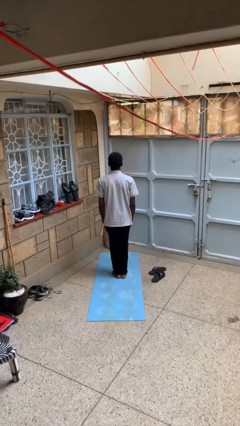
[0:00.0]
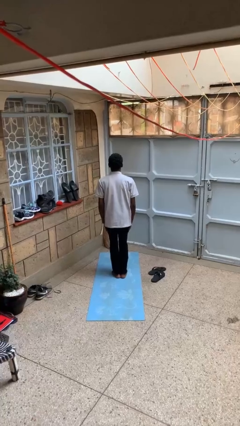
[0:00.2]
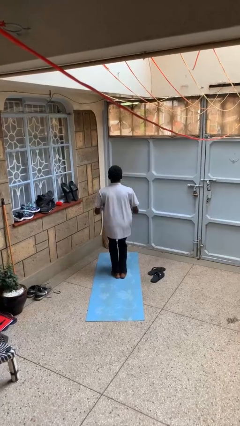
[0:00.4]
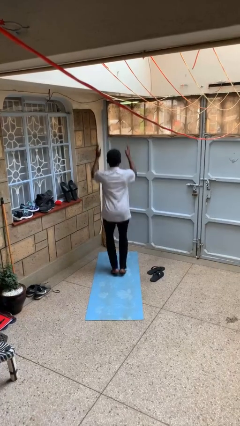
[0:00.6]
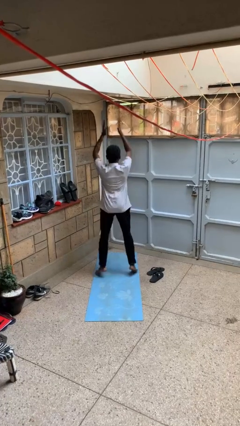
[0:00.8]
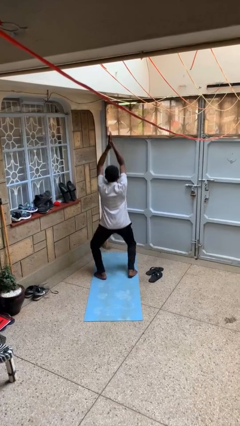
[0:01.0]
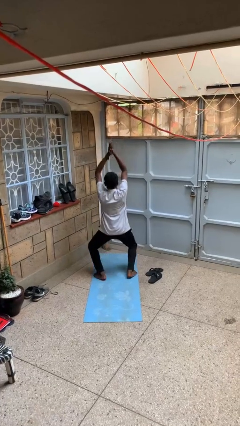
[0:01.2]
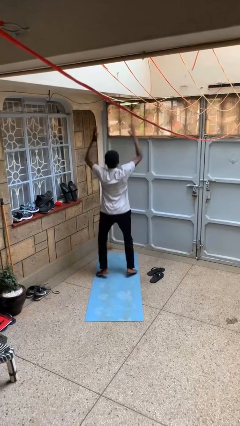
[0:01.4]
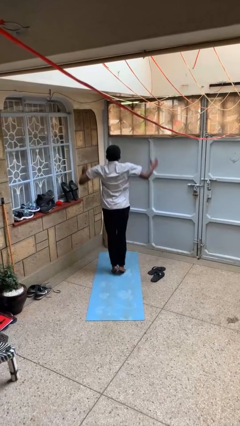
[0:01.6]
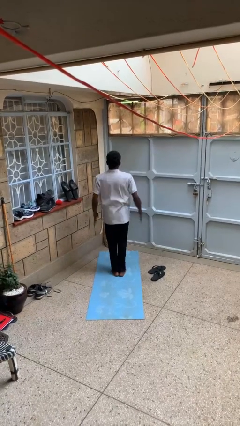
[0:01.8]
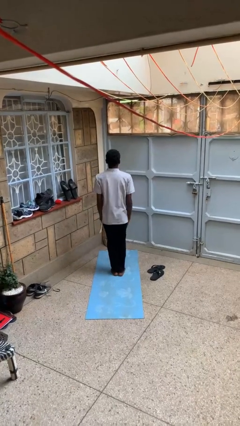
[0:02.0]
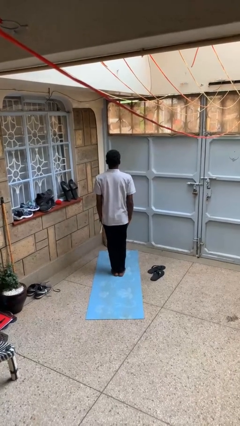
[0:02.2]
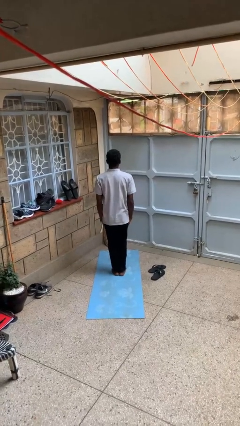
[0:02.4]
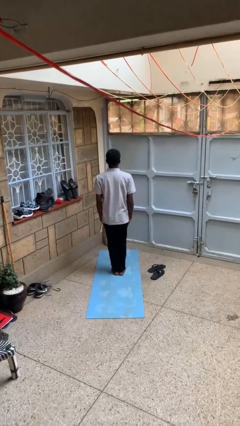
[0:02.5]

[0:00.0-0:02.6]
person exercises with jumping jacks

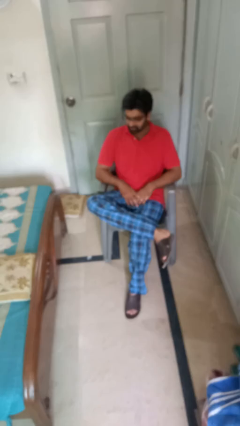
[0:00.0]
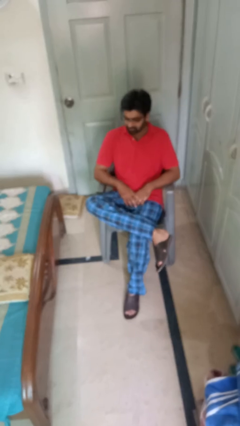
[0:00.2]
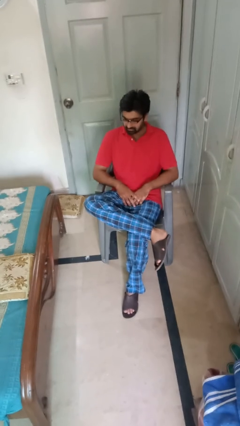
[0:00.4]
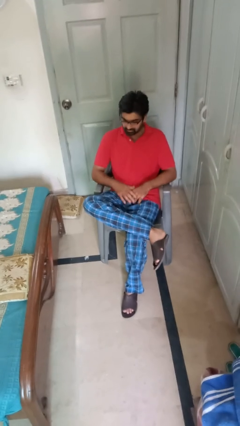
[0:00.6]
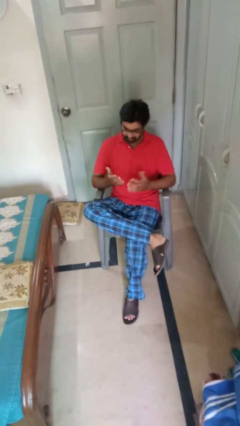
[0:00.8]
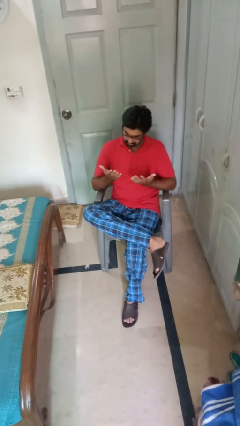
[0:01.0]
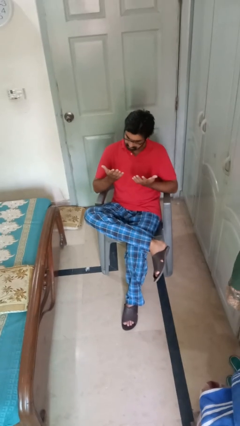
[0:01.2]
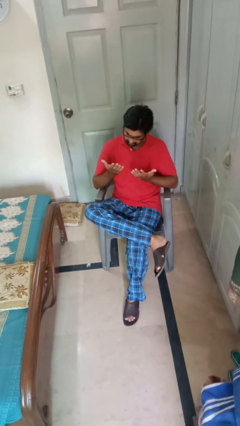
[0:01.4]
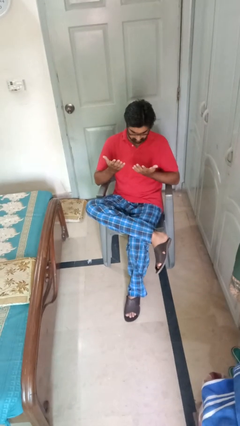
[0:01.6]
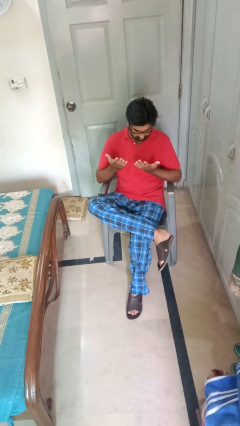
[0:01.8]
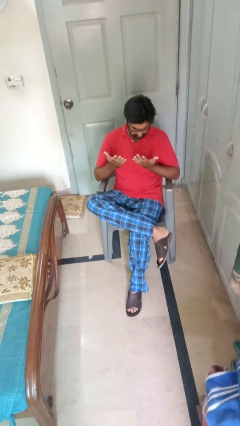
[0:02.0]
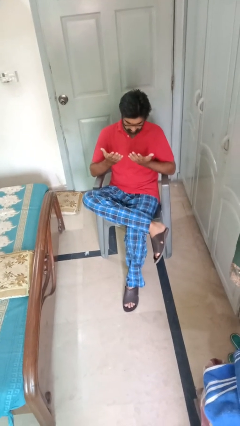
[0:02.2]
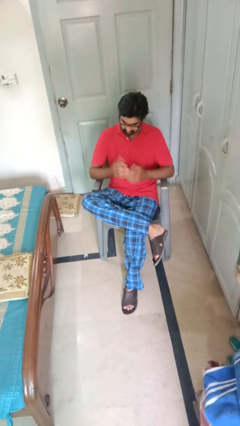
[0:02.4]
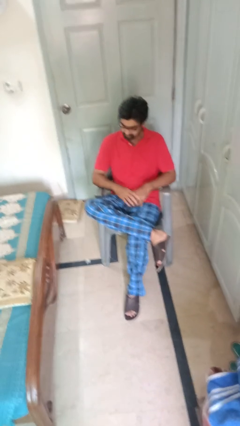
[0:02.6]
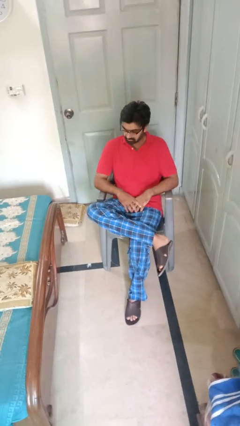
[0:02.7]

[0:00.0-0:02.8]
person looks at hands in lap

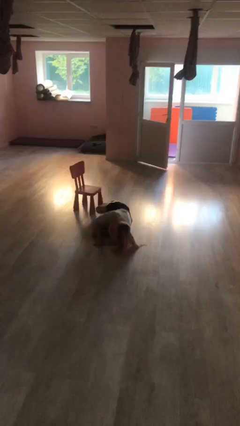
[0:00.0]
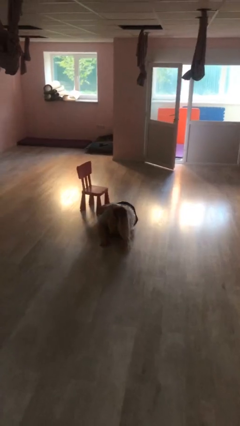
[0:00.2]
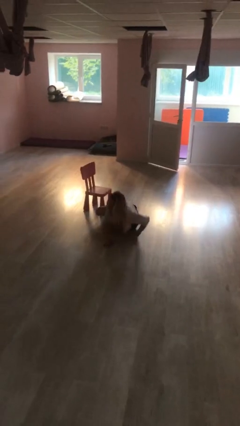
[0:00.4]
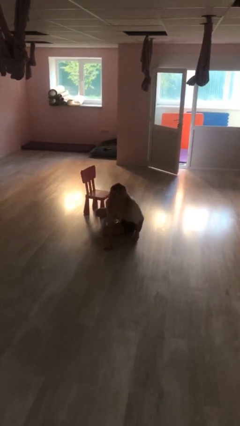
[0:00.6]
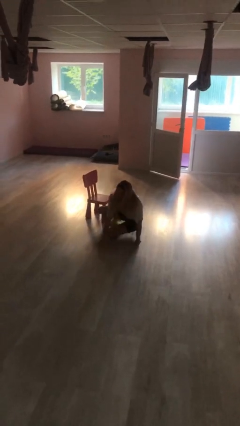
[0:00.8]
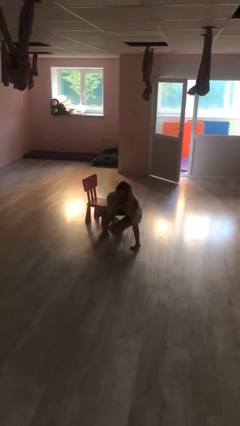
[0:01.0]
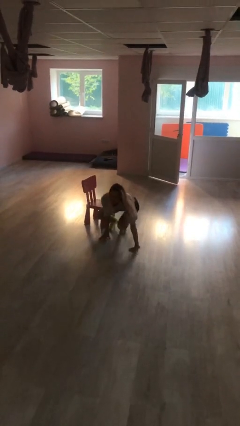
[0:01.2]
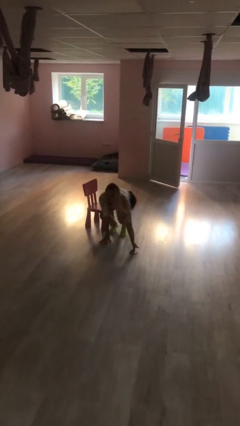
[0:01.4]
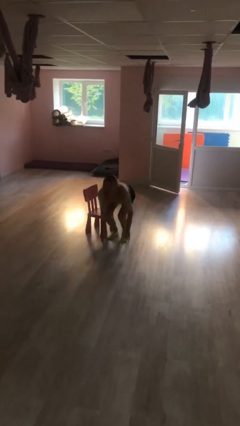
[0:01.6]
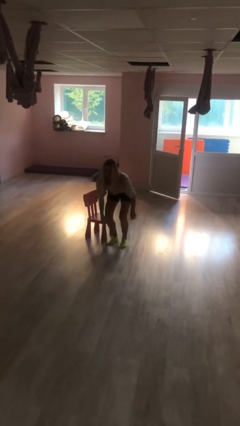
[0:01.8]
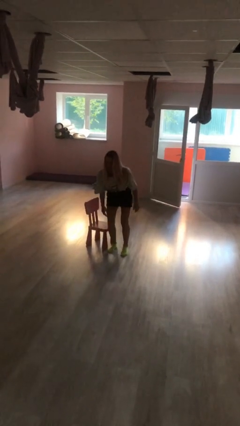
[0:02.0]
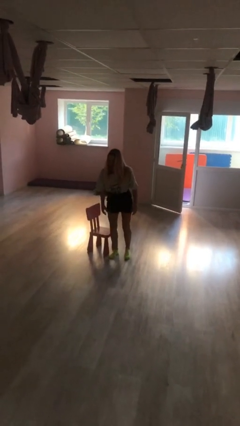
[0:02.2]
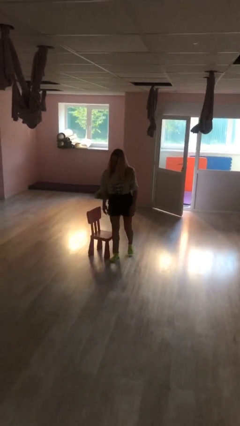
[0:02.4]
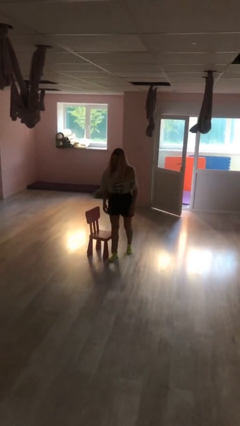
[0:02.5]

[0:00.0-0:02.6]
person stands up from floor

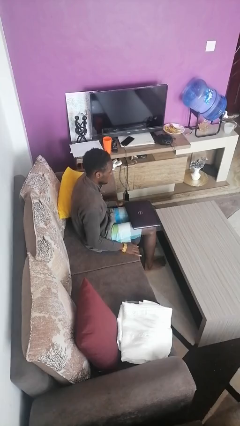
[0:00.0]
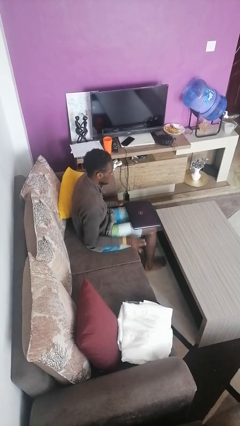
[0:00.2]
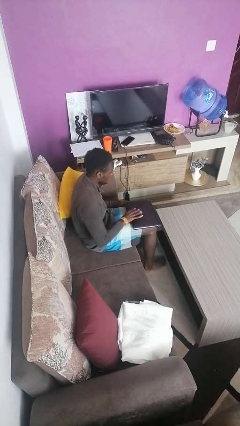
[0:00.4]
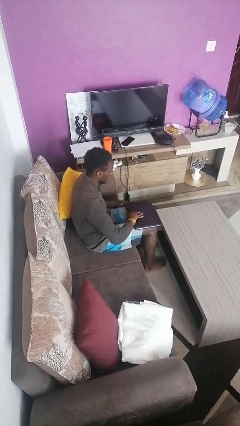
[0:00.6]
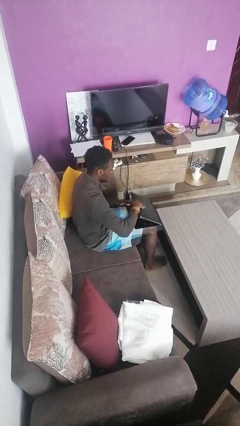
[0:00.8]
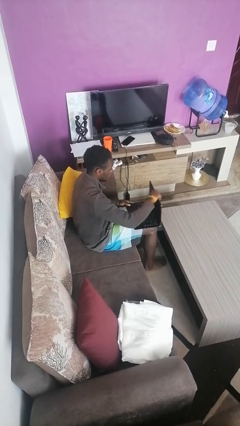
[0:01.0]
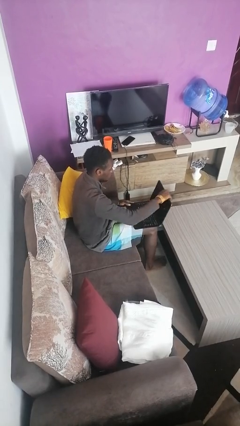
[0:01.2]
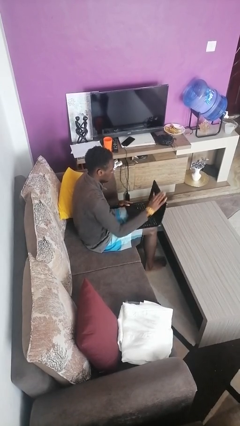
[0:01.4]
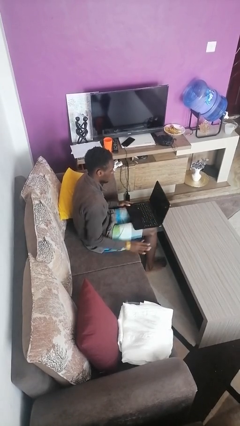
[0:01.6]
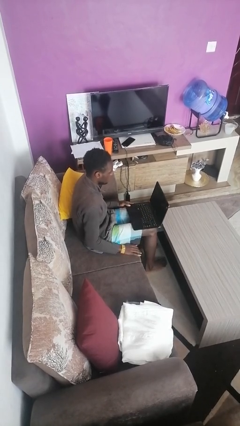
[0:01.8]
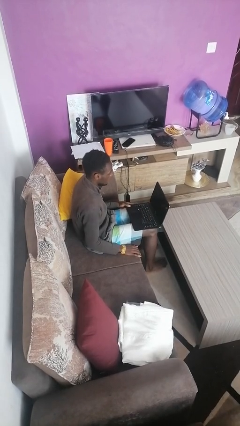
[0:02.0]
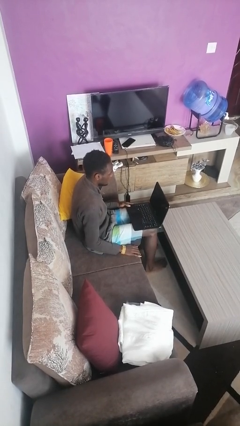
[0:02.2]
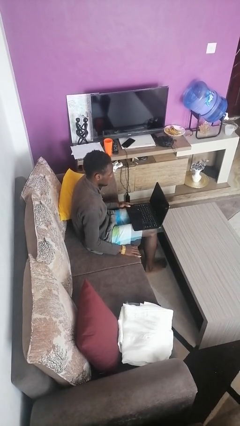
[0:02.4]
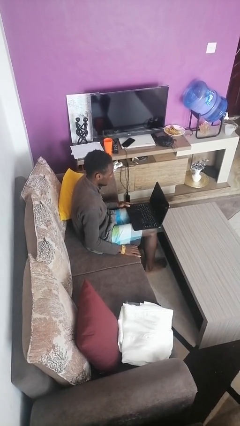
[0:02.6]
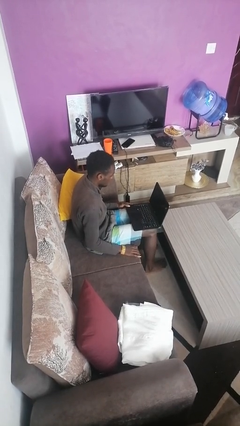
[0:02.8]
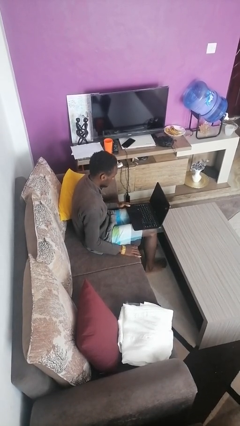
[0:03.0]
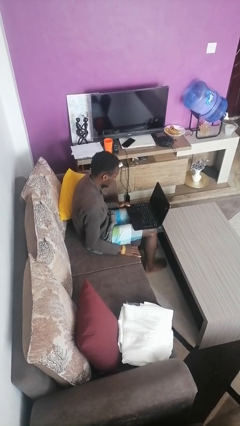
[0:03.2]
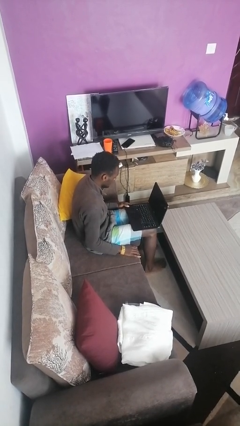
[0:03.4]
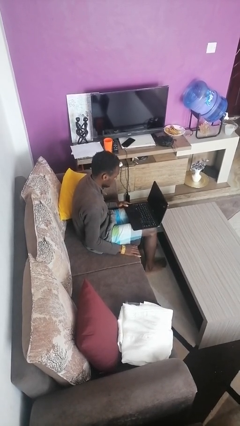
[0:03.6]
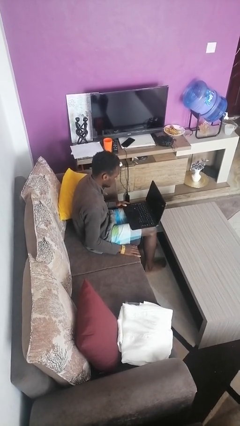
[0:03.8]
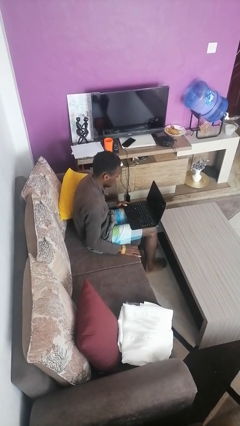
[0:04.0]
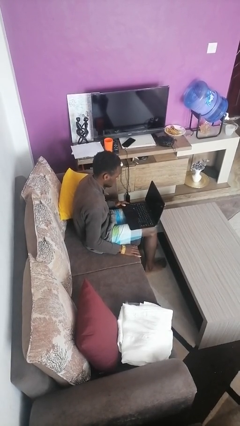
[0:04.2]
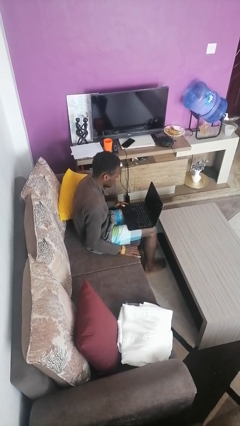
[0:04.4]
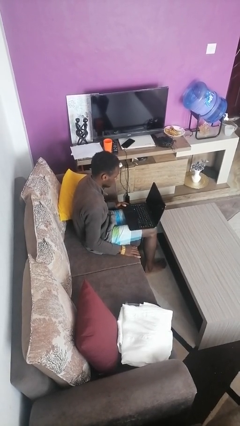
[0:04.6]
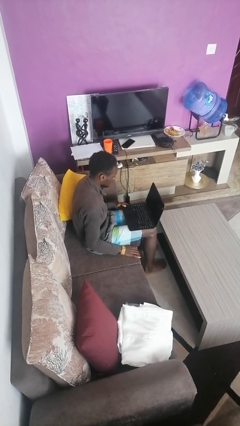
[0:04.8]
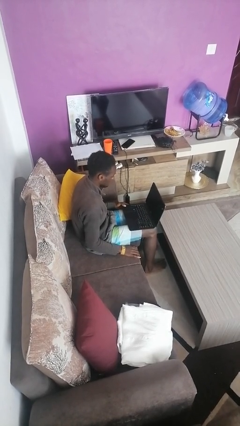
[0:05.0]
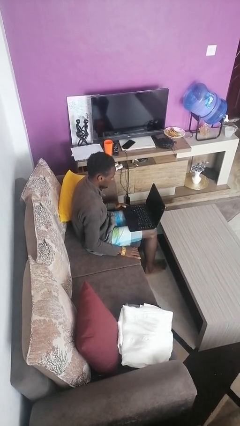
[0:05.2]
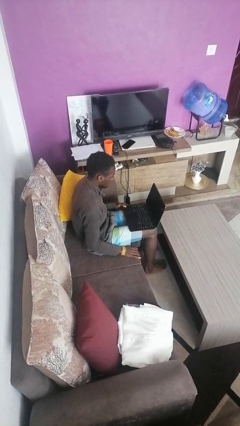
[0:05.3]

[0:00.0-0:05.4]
person opens laptop

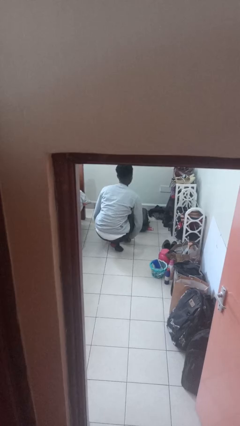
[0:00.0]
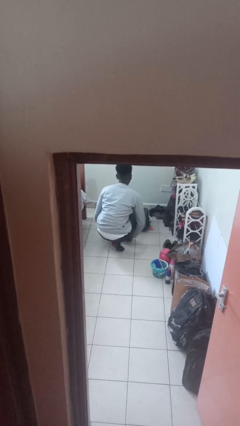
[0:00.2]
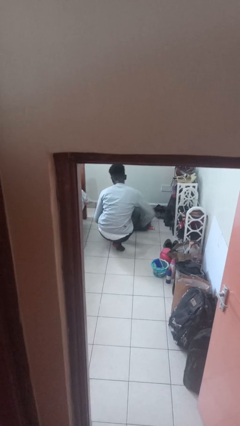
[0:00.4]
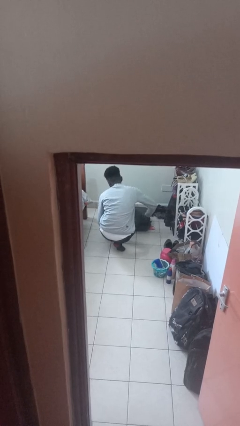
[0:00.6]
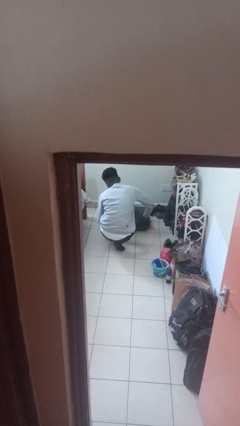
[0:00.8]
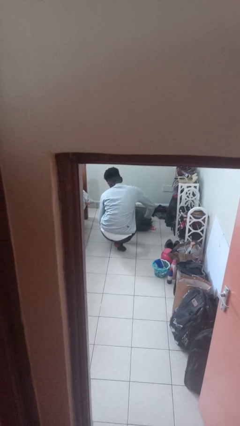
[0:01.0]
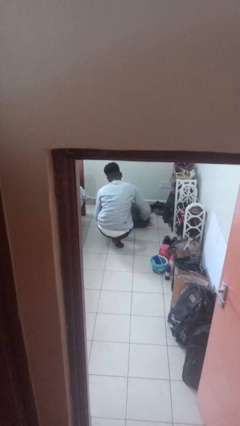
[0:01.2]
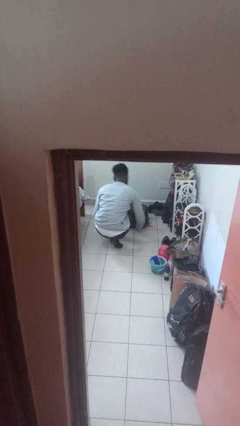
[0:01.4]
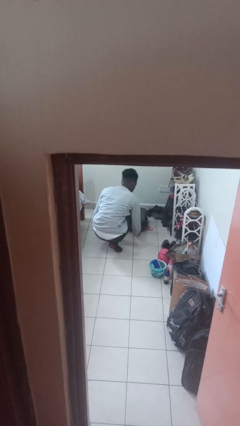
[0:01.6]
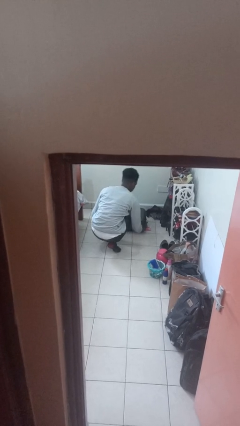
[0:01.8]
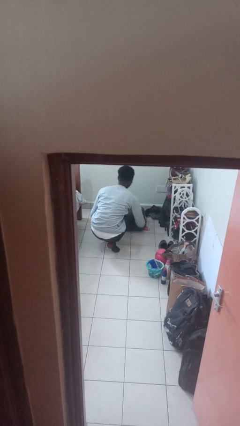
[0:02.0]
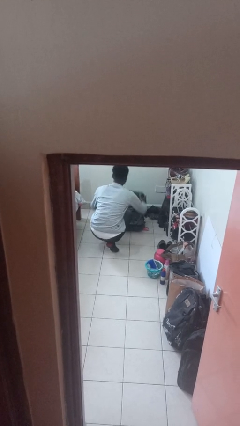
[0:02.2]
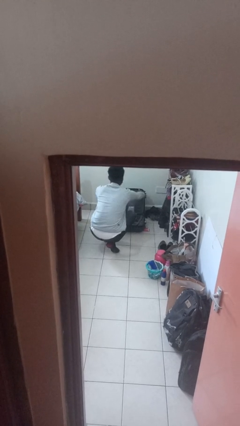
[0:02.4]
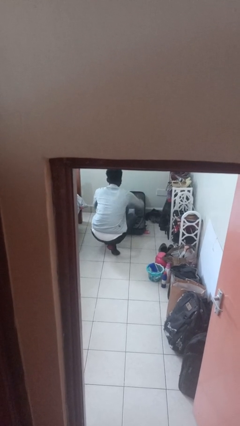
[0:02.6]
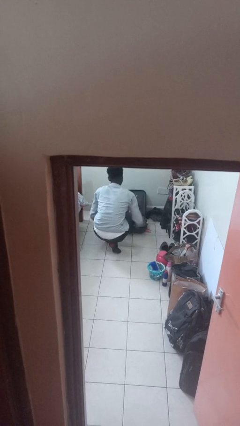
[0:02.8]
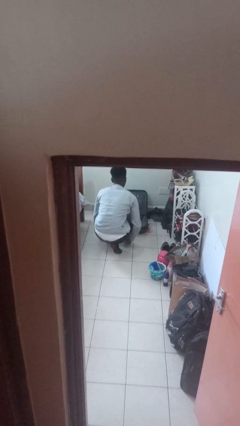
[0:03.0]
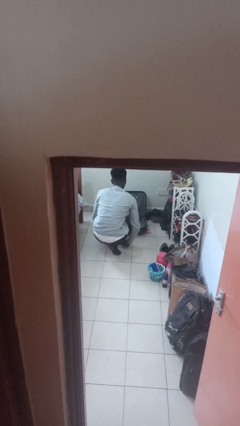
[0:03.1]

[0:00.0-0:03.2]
person opens suitcase

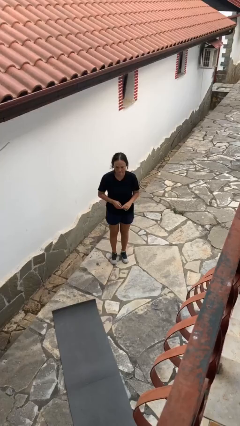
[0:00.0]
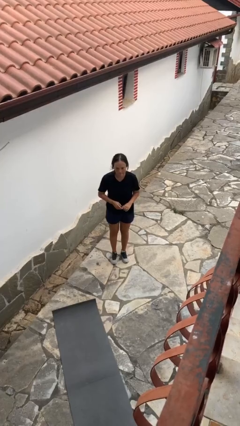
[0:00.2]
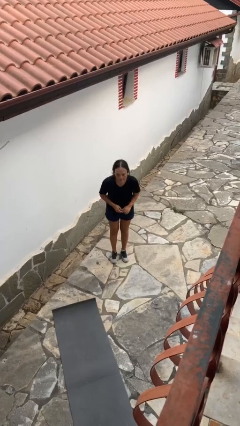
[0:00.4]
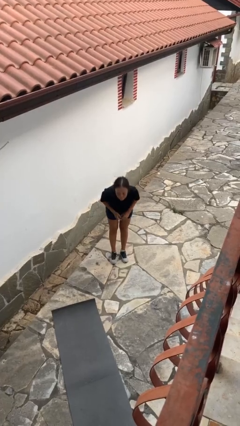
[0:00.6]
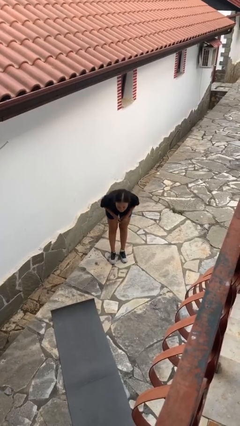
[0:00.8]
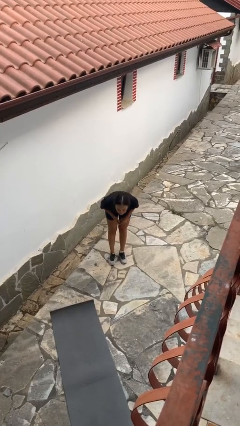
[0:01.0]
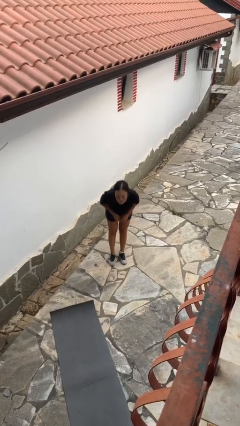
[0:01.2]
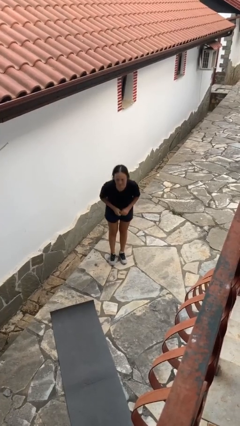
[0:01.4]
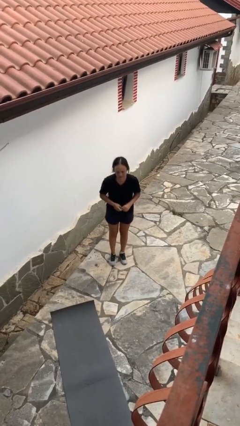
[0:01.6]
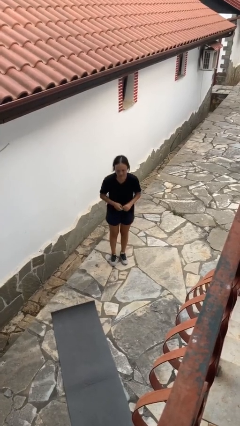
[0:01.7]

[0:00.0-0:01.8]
person bows
